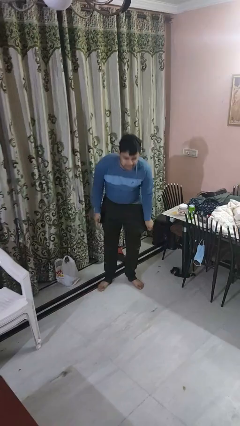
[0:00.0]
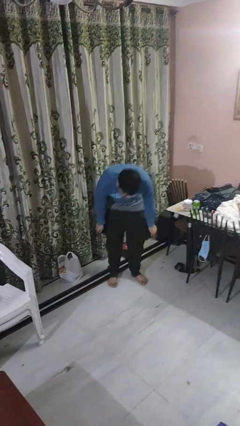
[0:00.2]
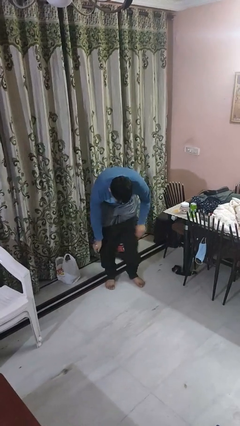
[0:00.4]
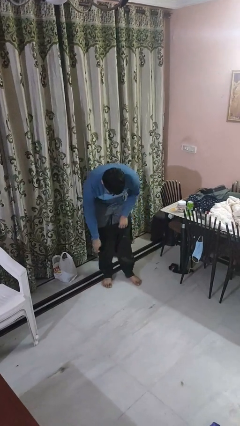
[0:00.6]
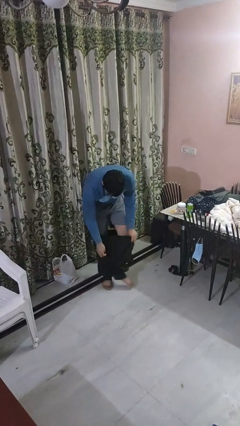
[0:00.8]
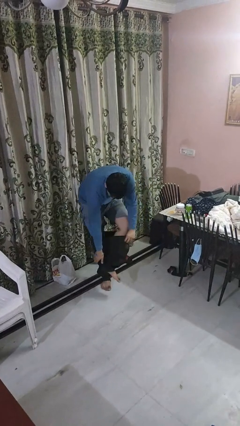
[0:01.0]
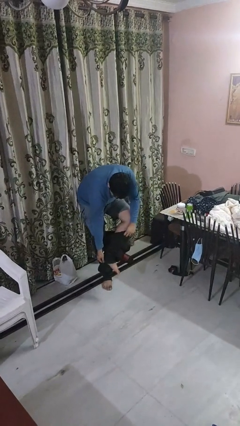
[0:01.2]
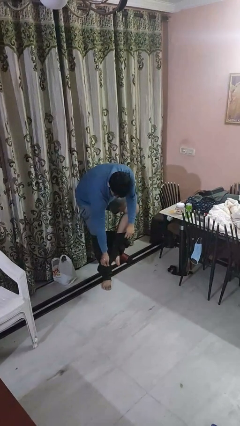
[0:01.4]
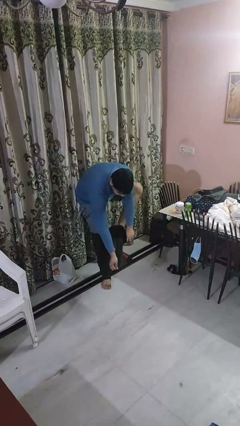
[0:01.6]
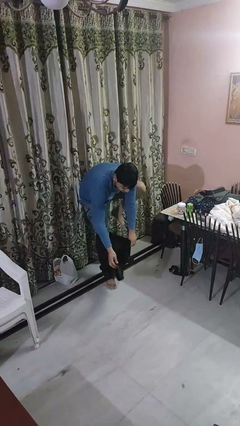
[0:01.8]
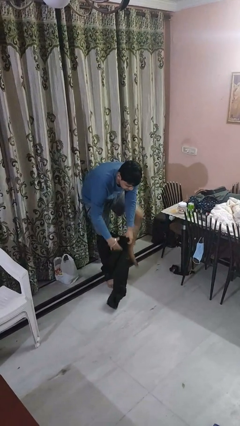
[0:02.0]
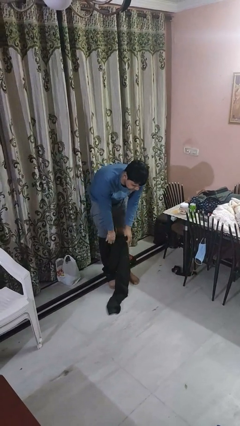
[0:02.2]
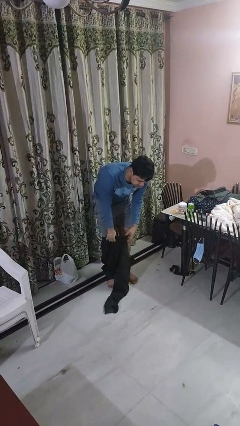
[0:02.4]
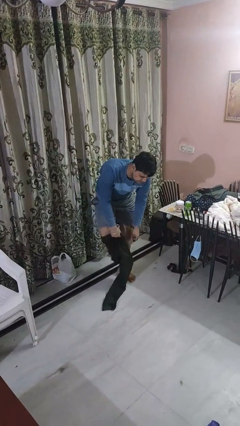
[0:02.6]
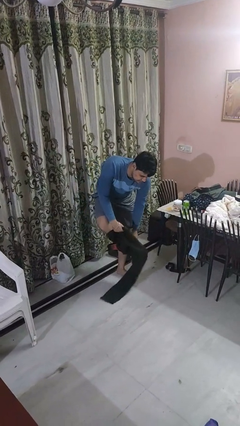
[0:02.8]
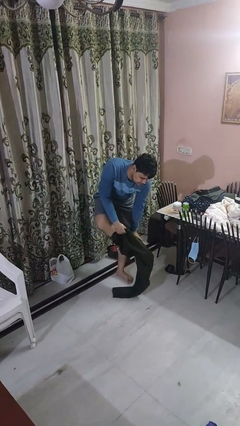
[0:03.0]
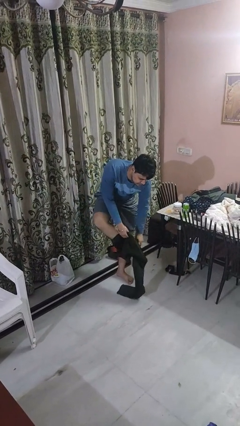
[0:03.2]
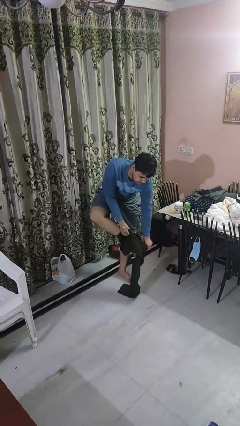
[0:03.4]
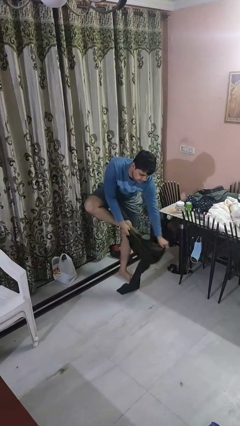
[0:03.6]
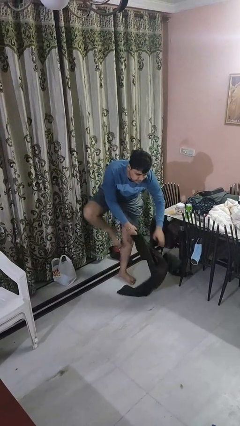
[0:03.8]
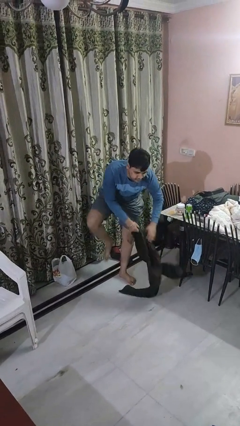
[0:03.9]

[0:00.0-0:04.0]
person takes off pants

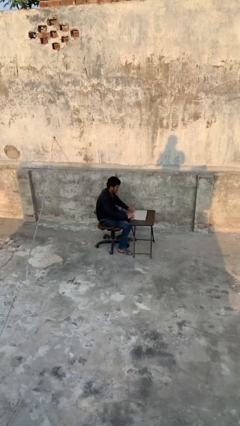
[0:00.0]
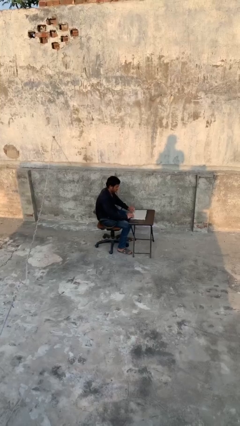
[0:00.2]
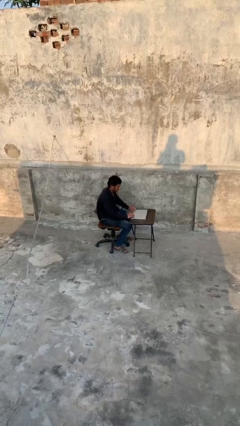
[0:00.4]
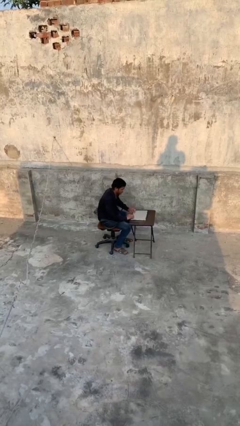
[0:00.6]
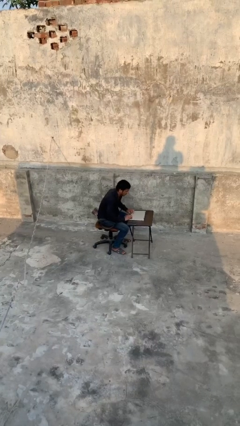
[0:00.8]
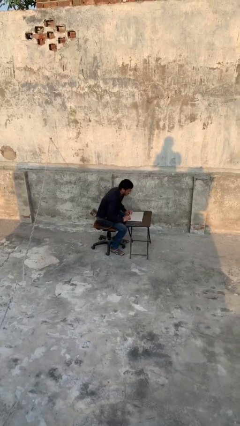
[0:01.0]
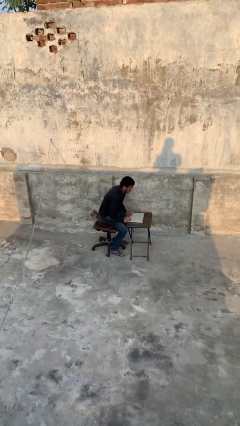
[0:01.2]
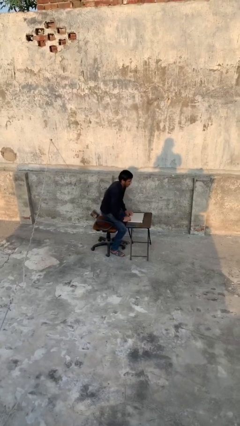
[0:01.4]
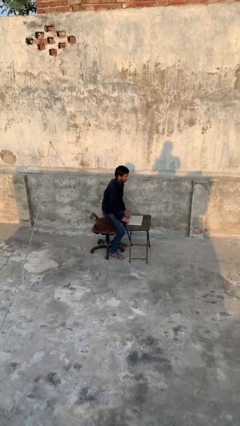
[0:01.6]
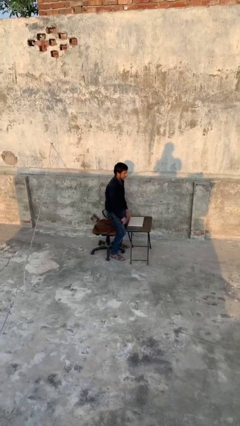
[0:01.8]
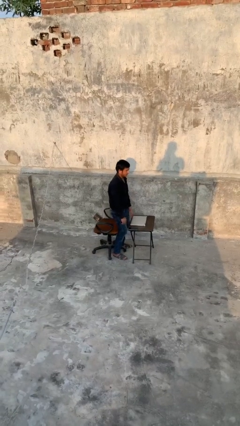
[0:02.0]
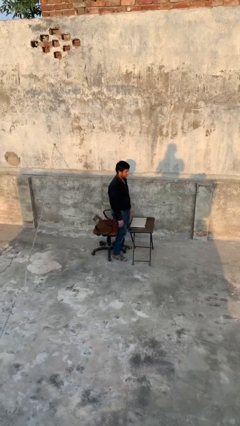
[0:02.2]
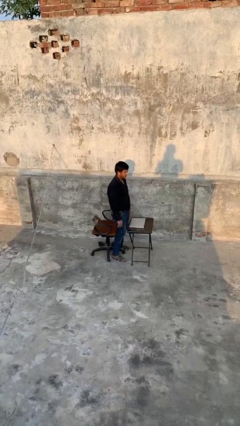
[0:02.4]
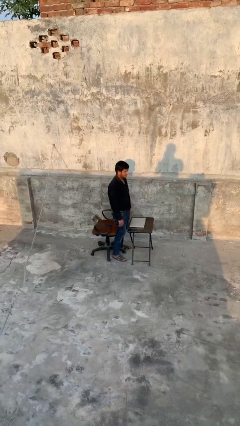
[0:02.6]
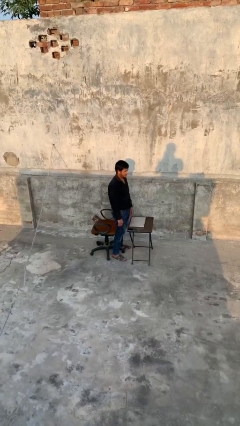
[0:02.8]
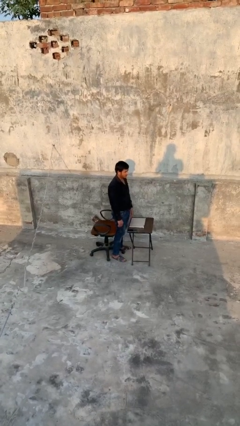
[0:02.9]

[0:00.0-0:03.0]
person stands up

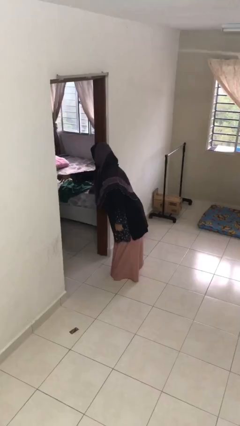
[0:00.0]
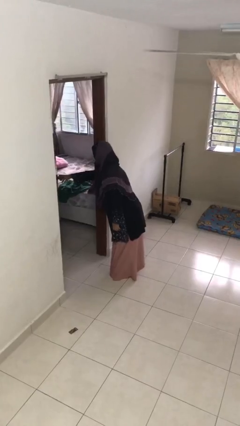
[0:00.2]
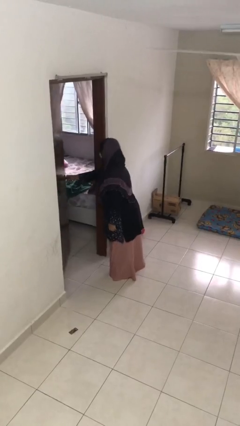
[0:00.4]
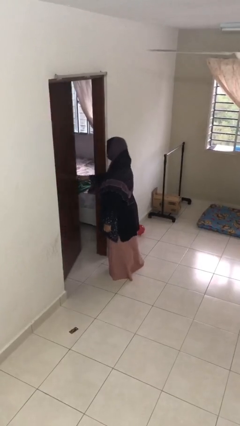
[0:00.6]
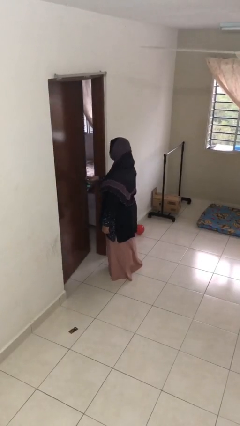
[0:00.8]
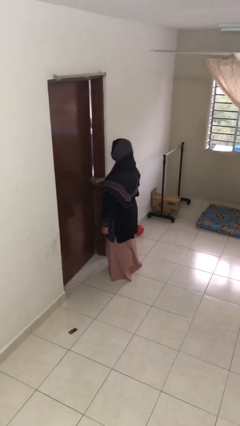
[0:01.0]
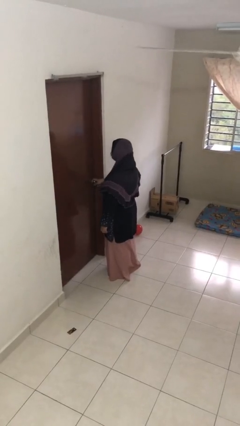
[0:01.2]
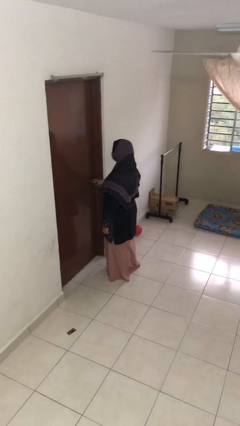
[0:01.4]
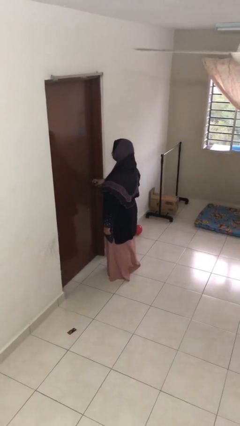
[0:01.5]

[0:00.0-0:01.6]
person closes facility door

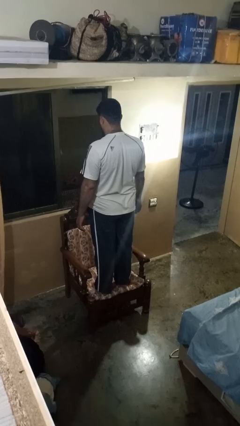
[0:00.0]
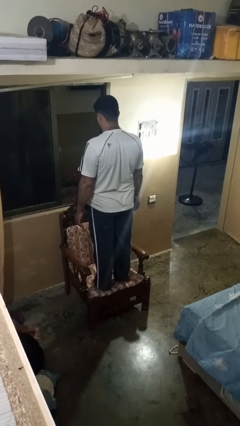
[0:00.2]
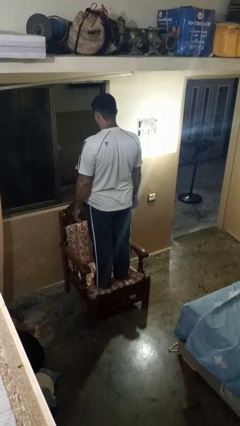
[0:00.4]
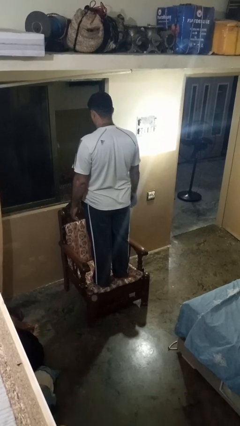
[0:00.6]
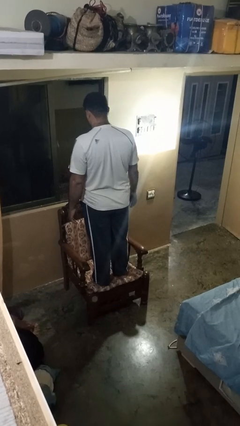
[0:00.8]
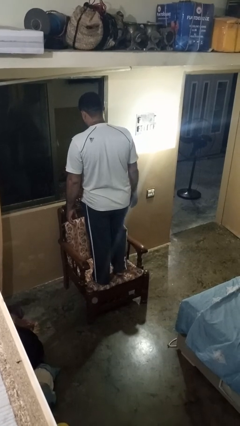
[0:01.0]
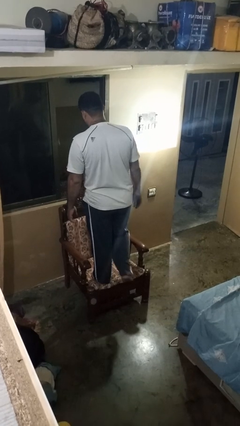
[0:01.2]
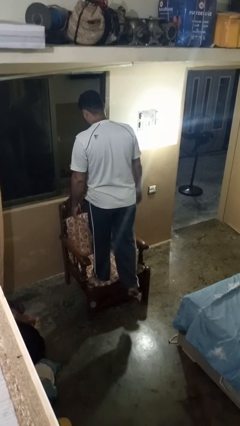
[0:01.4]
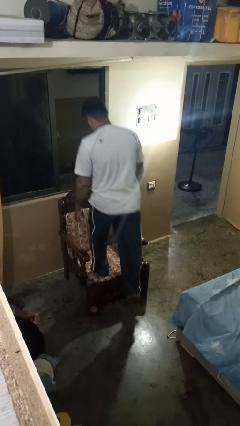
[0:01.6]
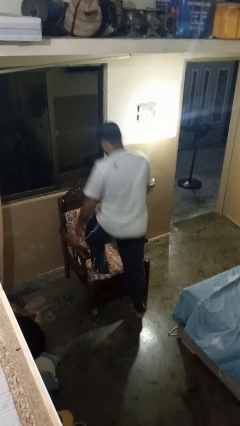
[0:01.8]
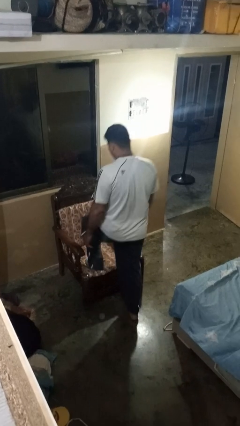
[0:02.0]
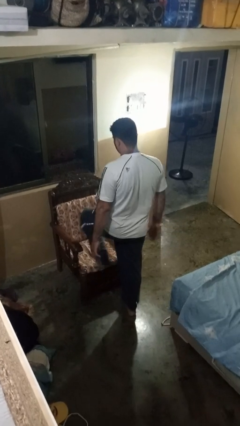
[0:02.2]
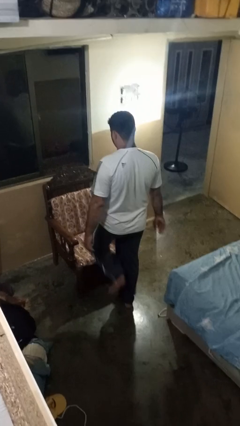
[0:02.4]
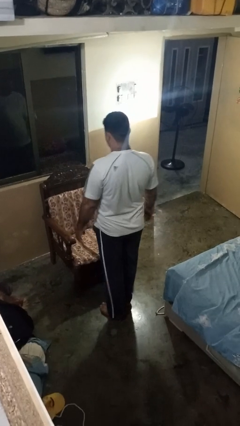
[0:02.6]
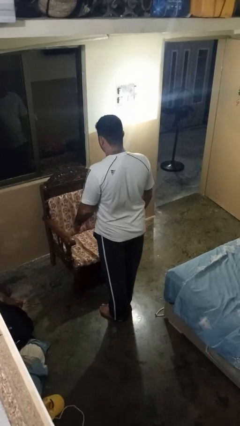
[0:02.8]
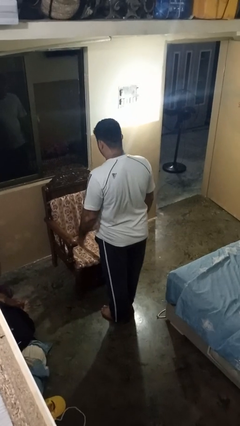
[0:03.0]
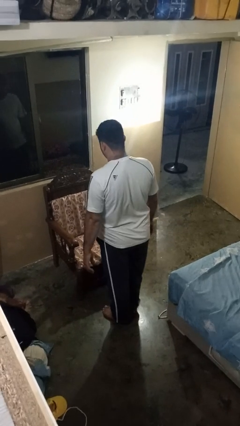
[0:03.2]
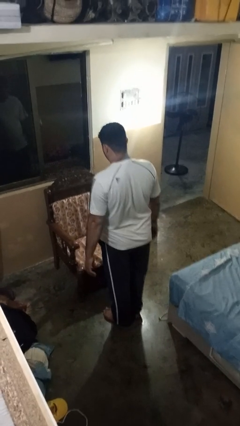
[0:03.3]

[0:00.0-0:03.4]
person climbs off chair

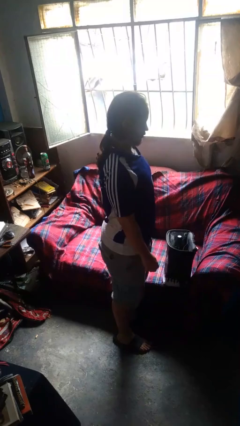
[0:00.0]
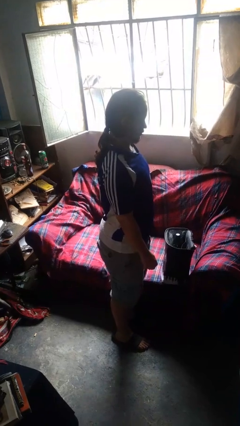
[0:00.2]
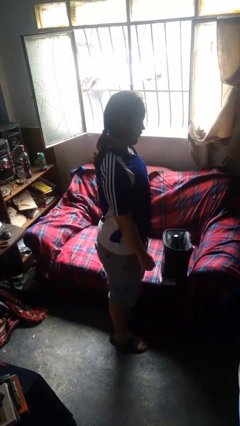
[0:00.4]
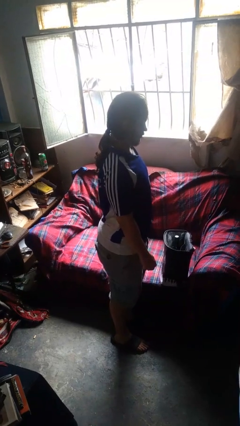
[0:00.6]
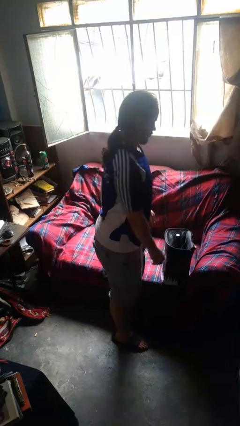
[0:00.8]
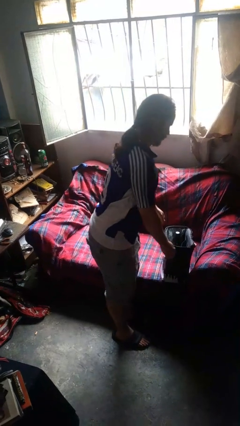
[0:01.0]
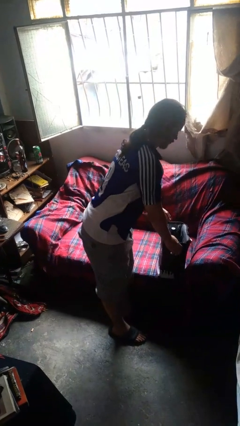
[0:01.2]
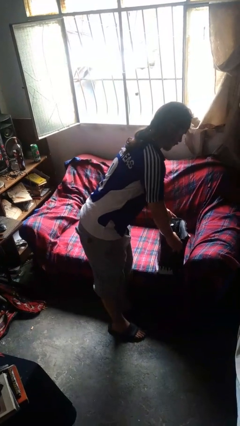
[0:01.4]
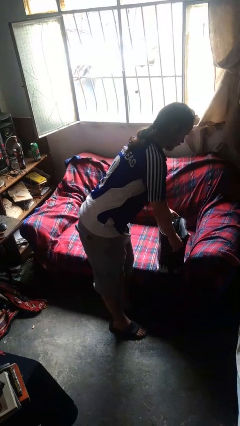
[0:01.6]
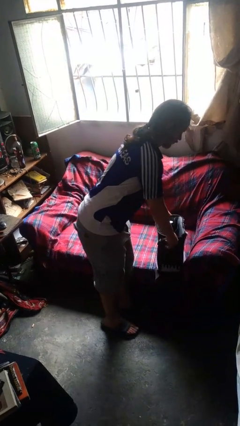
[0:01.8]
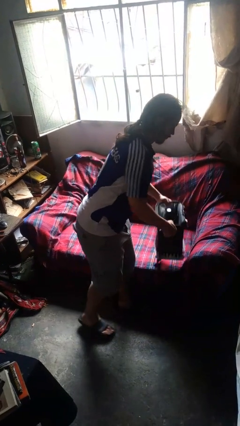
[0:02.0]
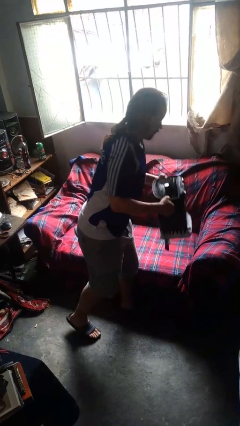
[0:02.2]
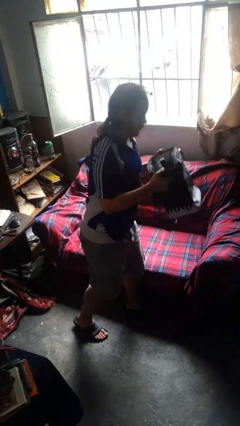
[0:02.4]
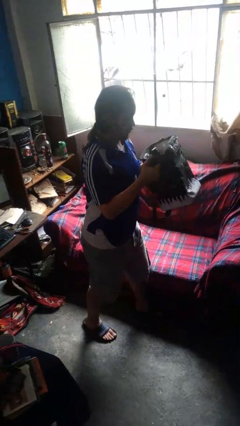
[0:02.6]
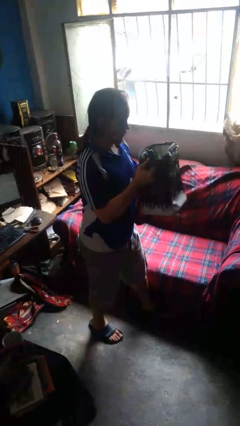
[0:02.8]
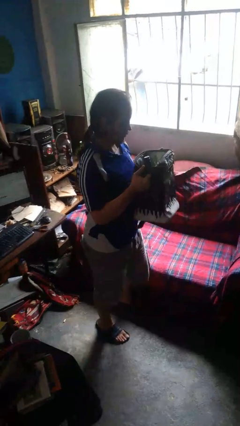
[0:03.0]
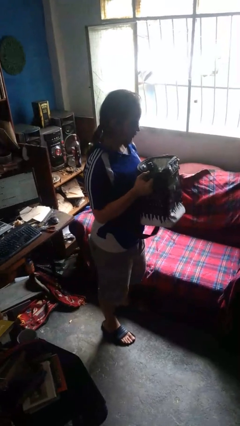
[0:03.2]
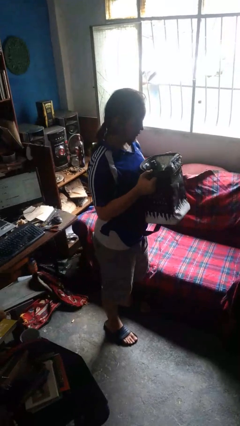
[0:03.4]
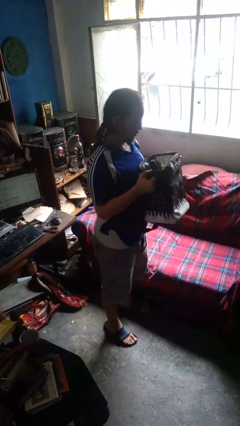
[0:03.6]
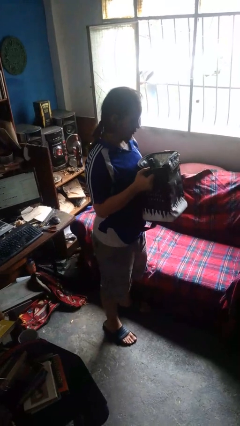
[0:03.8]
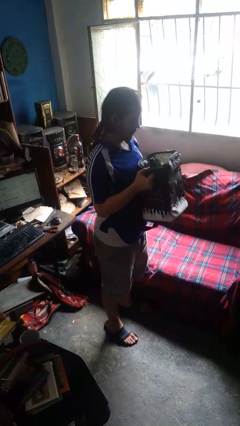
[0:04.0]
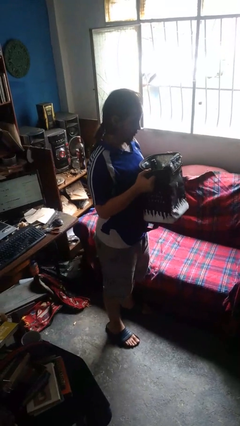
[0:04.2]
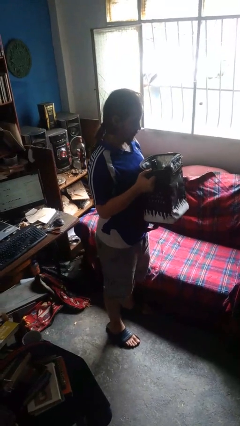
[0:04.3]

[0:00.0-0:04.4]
person picks up object from couch

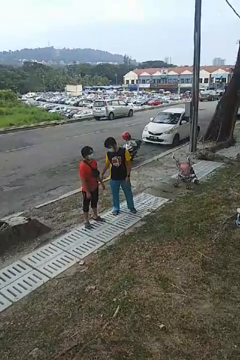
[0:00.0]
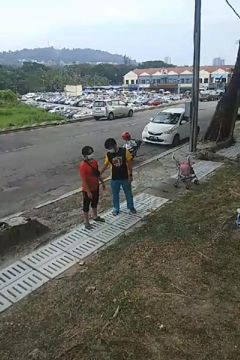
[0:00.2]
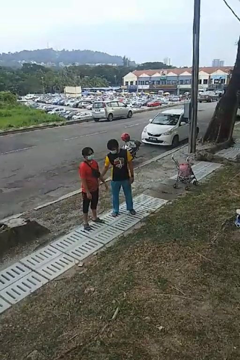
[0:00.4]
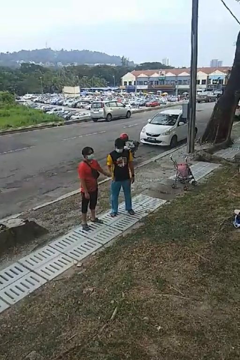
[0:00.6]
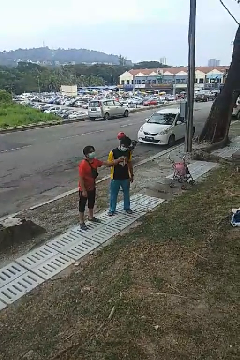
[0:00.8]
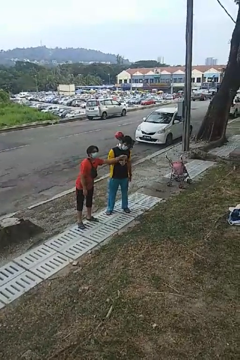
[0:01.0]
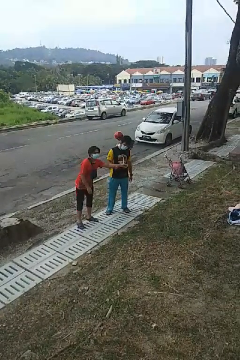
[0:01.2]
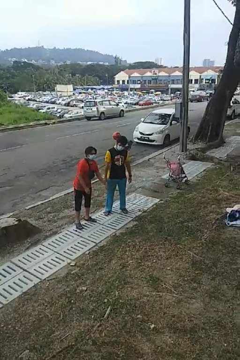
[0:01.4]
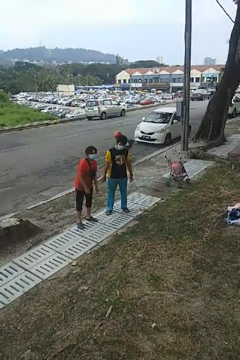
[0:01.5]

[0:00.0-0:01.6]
person grabs person by forearm
